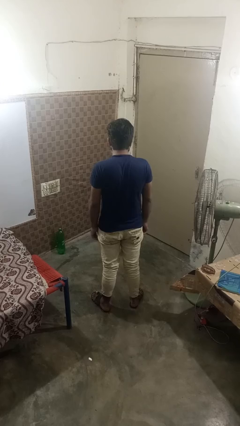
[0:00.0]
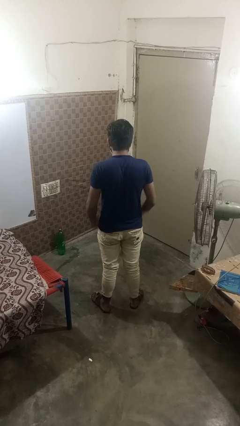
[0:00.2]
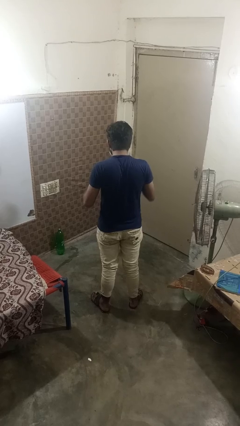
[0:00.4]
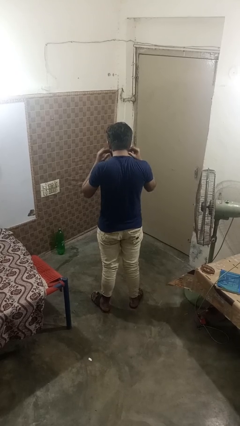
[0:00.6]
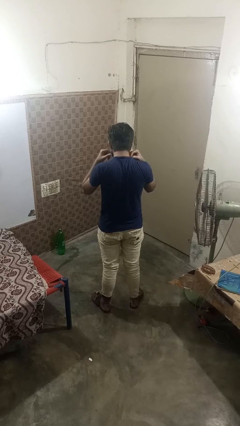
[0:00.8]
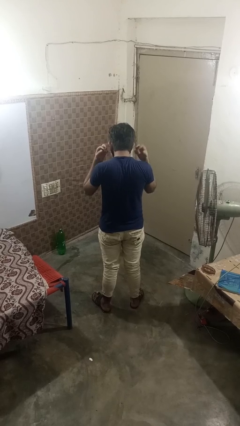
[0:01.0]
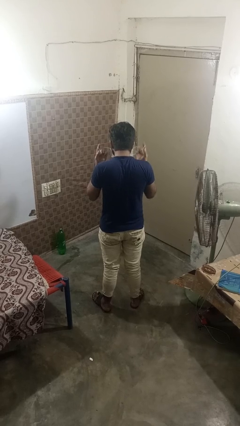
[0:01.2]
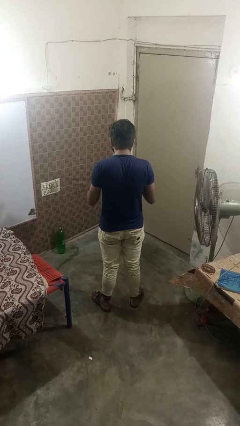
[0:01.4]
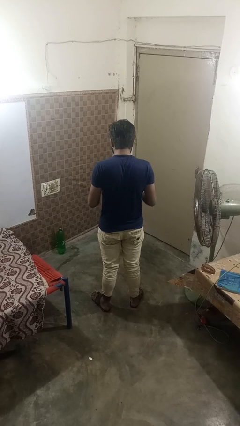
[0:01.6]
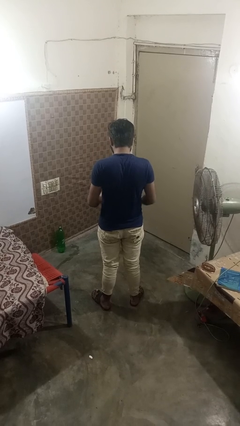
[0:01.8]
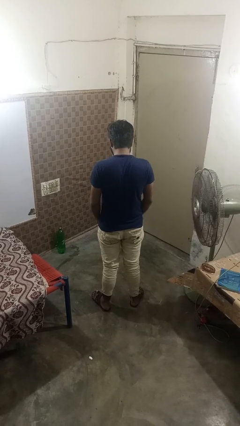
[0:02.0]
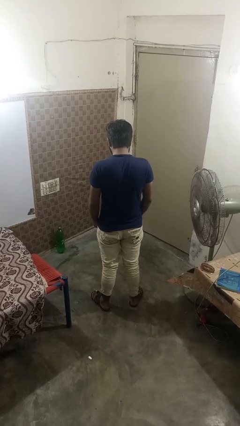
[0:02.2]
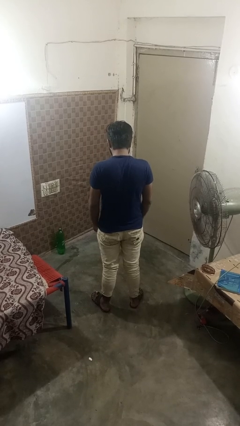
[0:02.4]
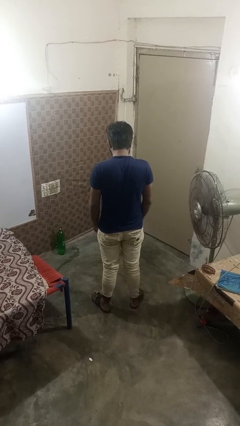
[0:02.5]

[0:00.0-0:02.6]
person takes off facemask

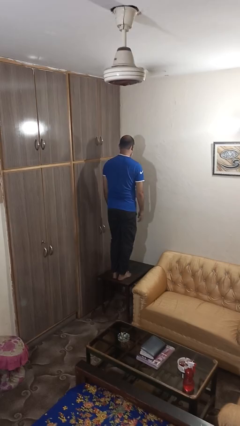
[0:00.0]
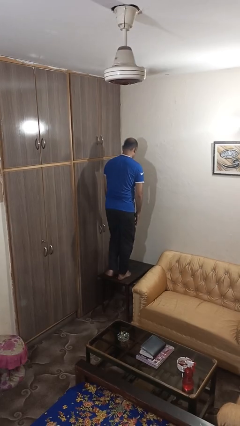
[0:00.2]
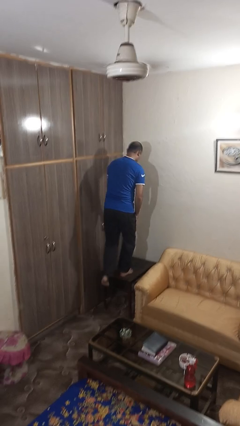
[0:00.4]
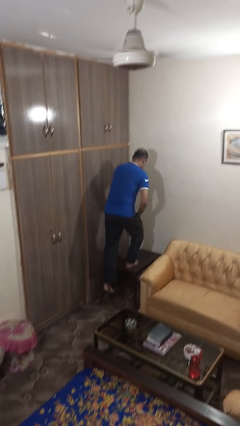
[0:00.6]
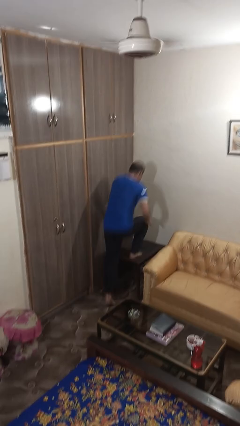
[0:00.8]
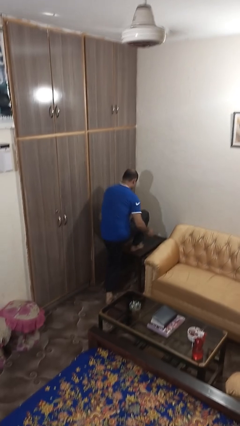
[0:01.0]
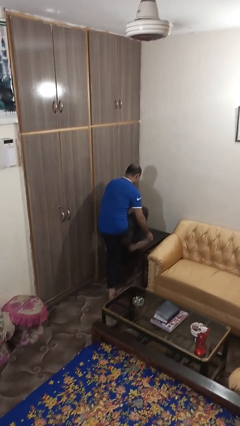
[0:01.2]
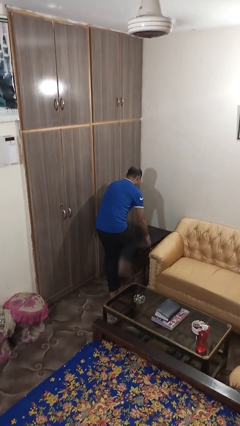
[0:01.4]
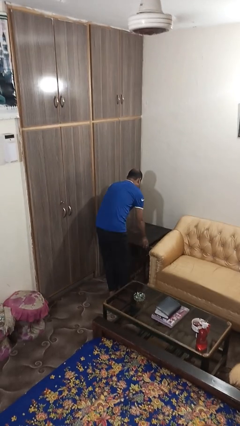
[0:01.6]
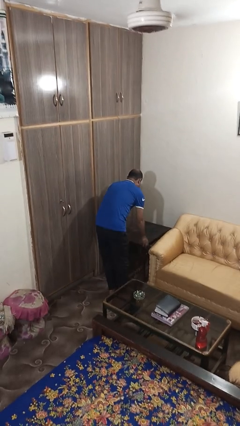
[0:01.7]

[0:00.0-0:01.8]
person climbs off table

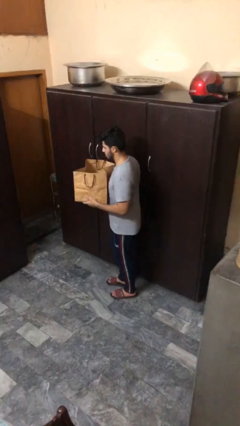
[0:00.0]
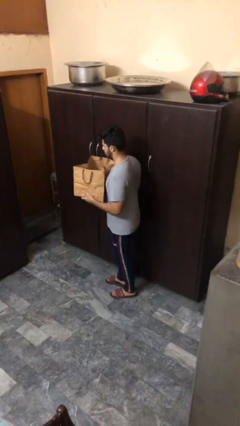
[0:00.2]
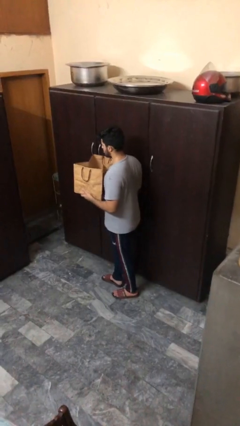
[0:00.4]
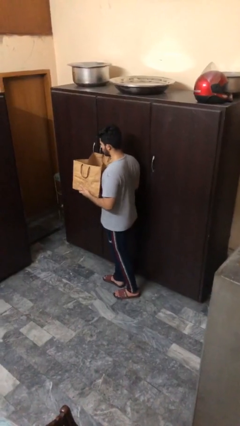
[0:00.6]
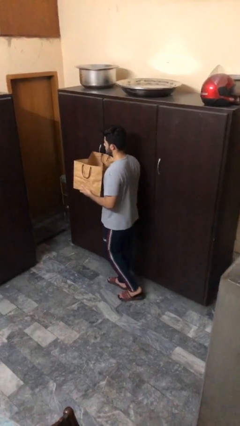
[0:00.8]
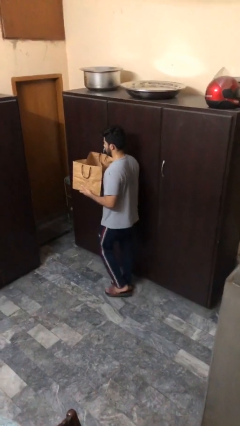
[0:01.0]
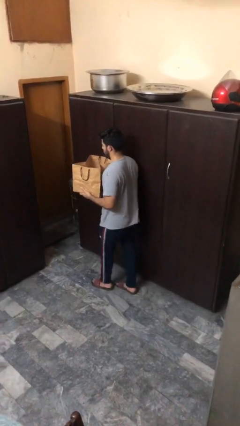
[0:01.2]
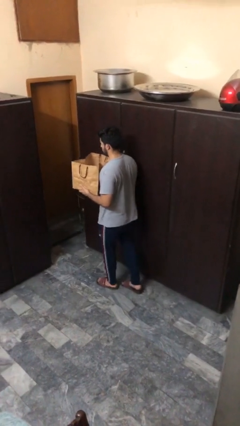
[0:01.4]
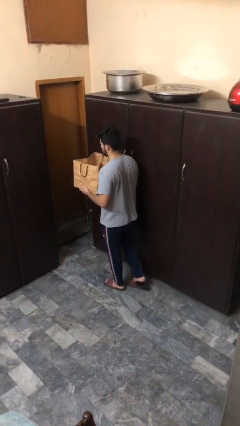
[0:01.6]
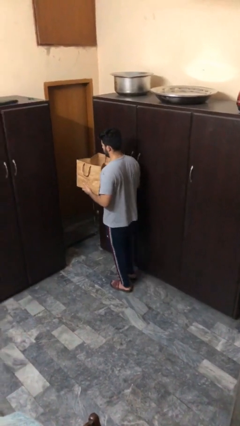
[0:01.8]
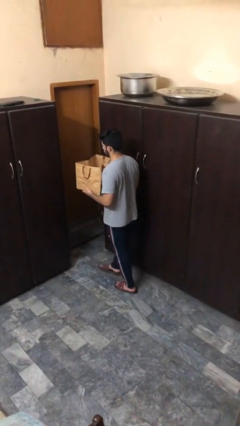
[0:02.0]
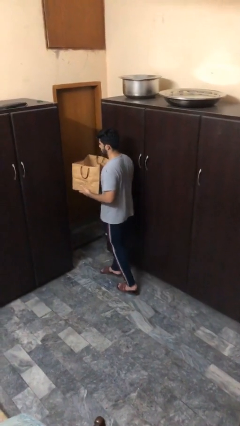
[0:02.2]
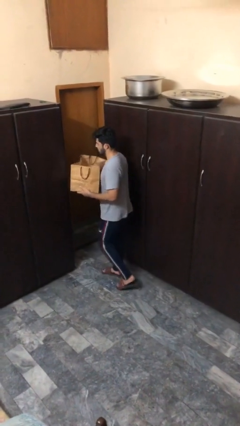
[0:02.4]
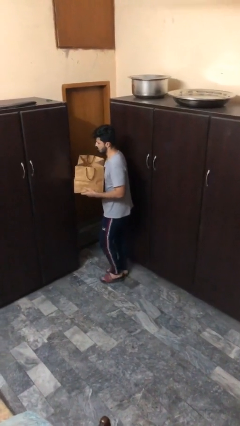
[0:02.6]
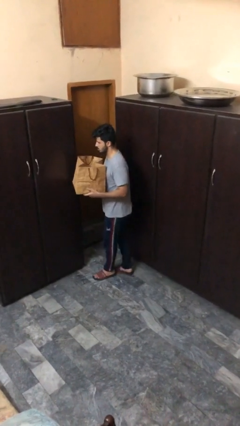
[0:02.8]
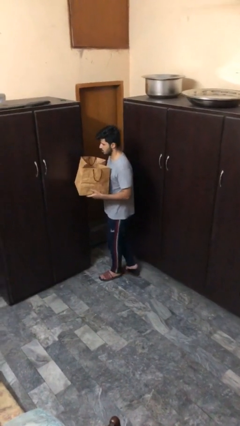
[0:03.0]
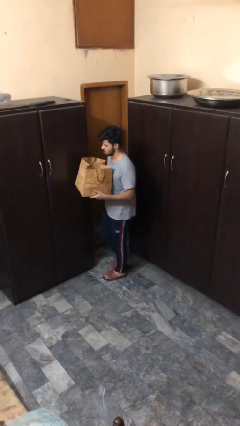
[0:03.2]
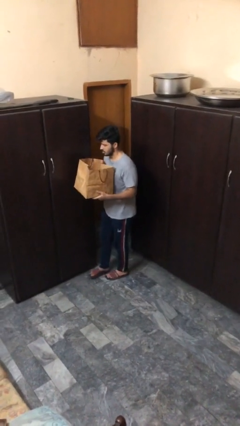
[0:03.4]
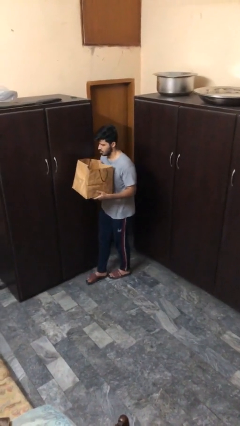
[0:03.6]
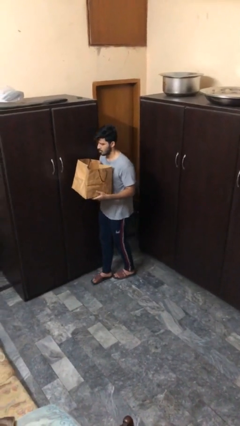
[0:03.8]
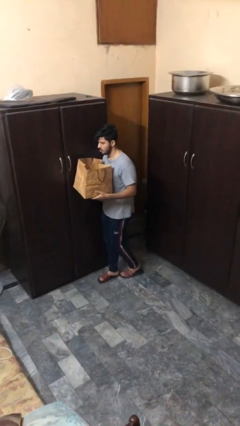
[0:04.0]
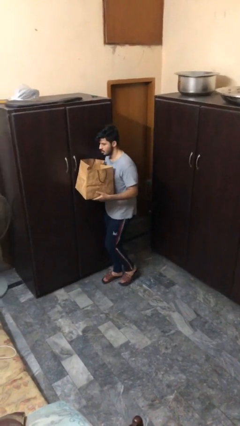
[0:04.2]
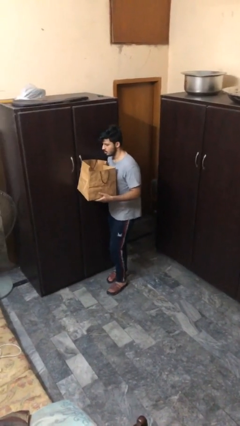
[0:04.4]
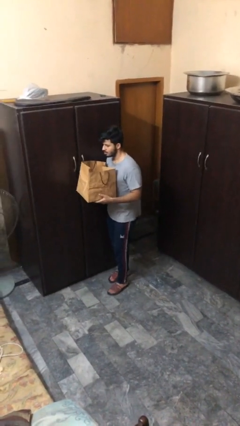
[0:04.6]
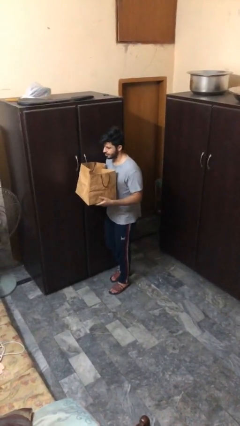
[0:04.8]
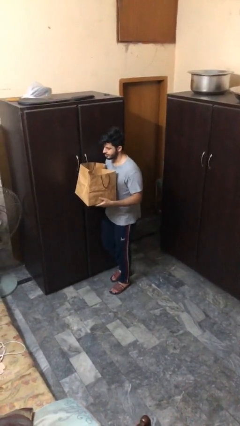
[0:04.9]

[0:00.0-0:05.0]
person carries groceries

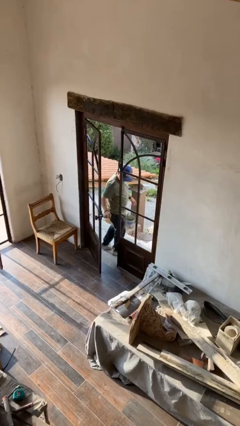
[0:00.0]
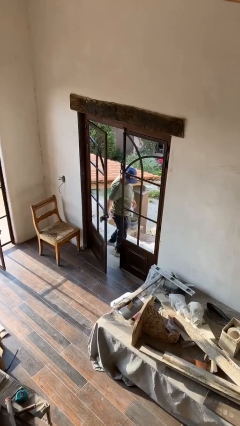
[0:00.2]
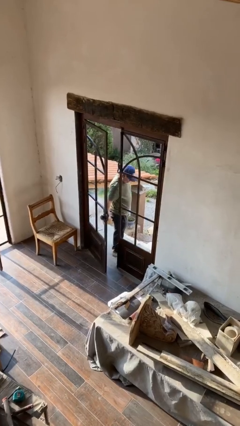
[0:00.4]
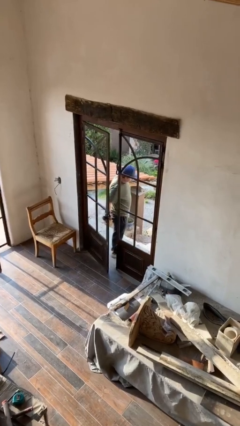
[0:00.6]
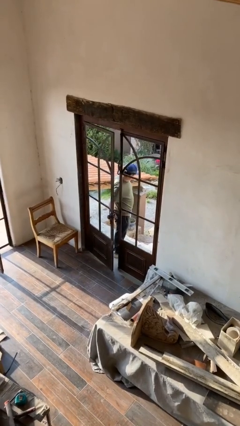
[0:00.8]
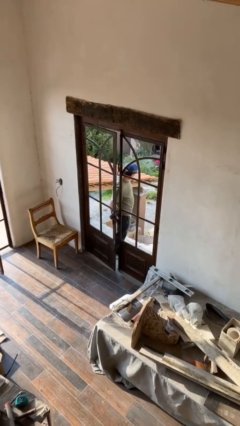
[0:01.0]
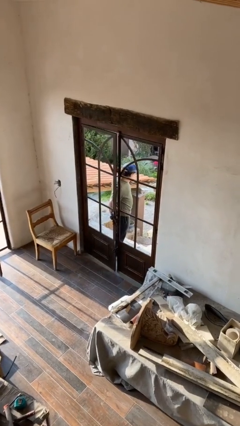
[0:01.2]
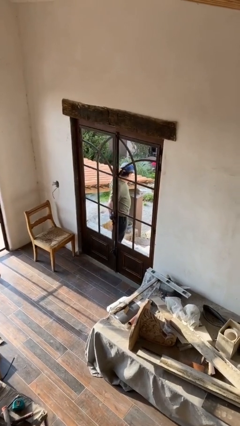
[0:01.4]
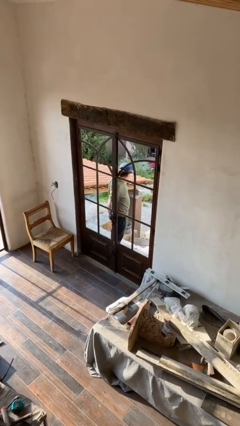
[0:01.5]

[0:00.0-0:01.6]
person closes facility door

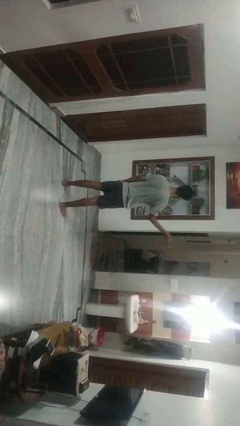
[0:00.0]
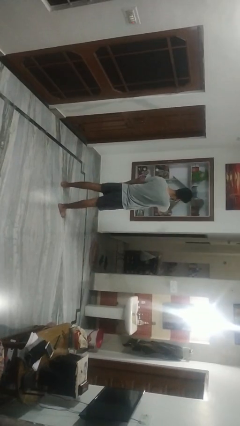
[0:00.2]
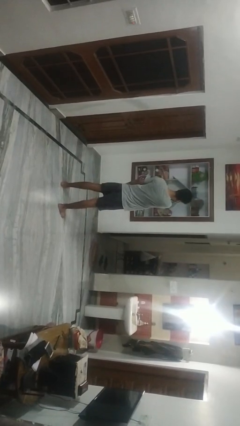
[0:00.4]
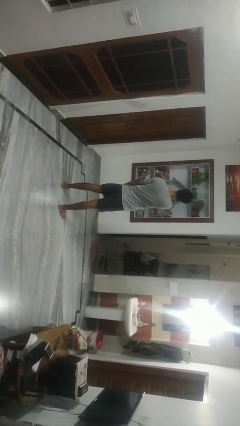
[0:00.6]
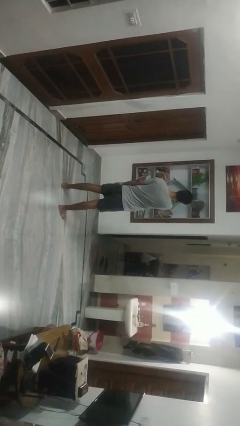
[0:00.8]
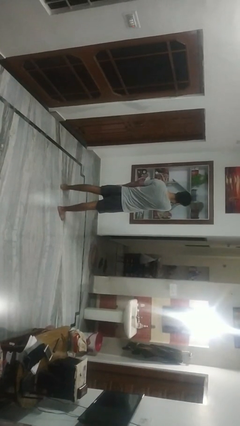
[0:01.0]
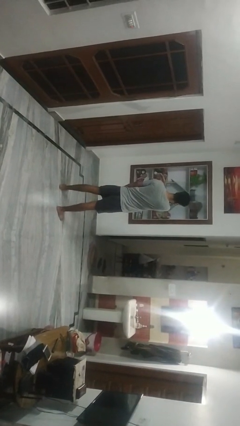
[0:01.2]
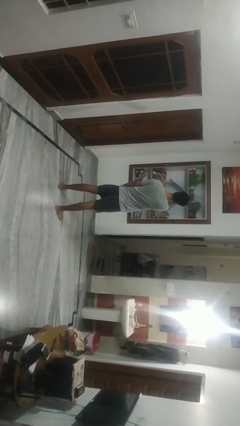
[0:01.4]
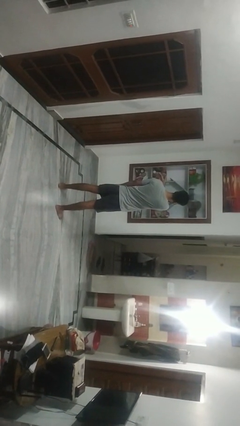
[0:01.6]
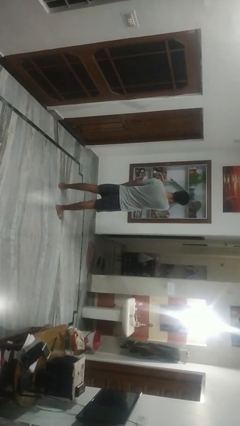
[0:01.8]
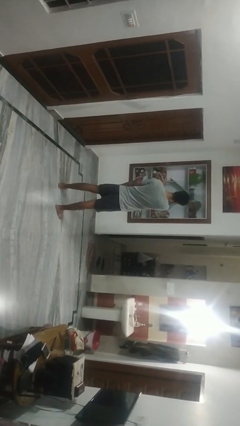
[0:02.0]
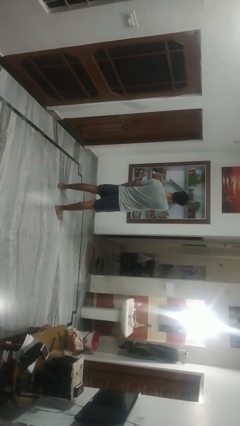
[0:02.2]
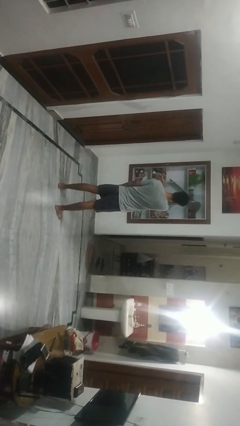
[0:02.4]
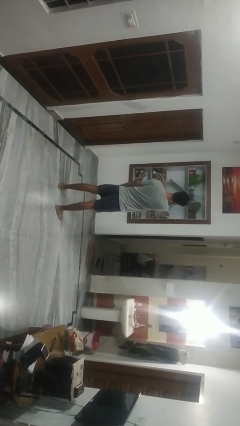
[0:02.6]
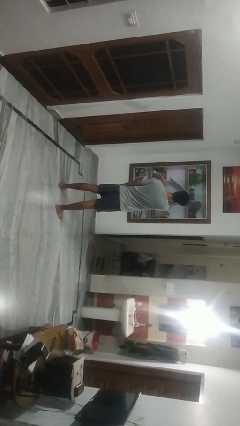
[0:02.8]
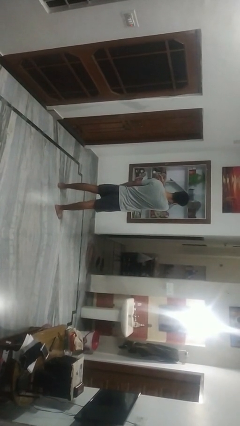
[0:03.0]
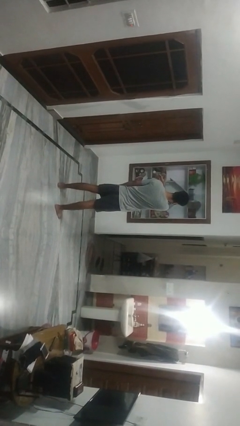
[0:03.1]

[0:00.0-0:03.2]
person gestures swipe left

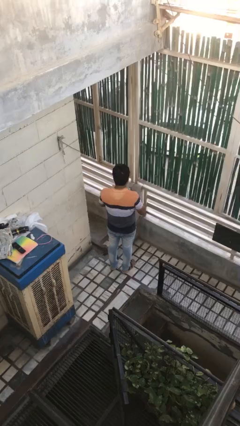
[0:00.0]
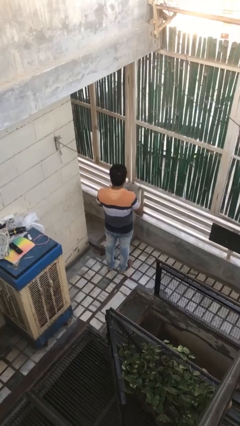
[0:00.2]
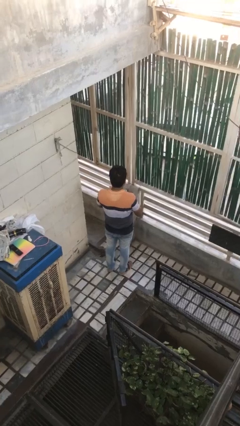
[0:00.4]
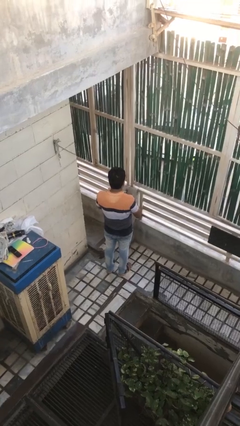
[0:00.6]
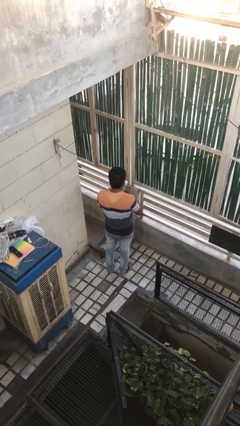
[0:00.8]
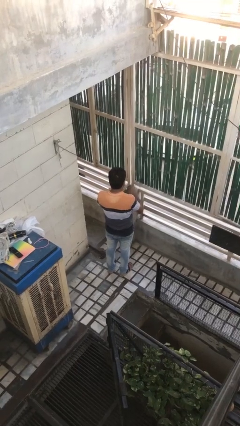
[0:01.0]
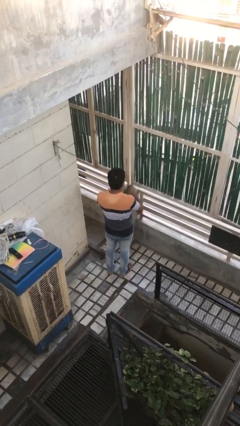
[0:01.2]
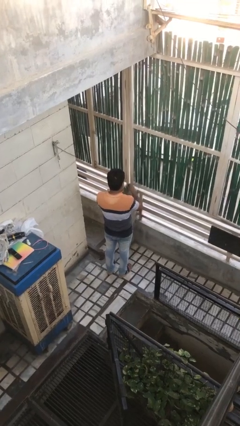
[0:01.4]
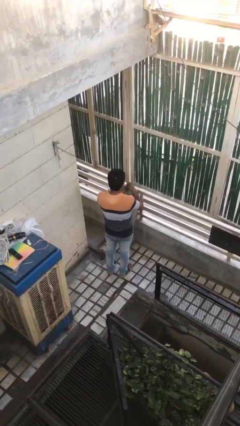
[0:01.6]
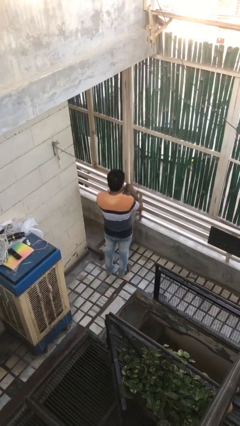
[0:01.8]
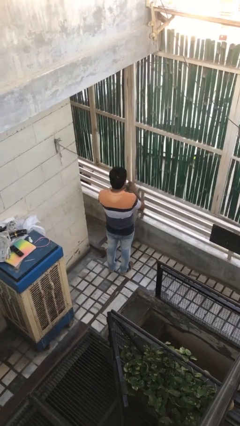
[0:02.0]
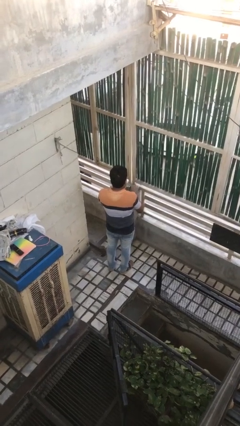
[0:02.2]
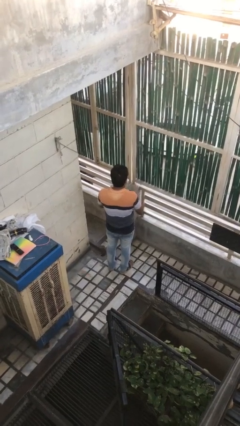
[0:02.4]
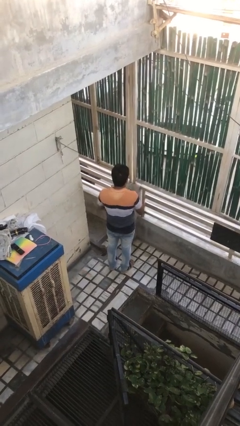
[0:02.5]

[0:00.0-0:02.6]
person opens beverage can

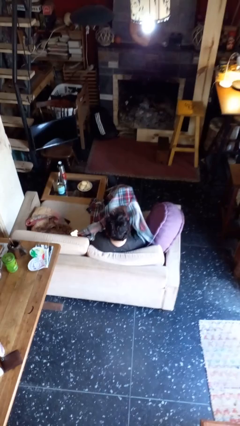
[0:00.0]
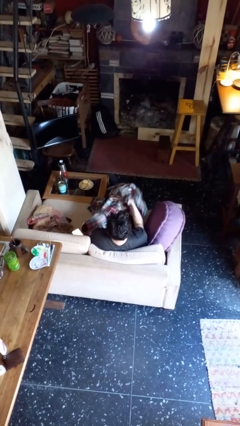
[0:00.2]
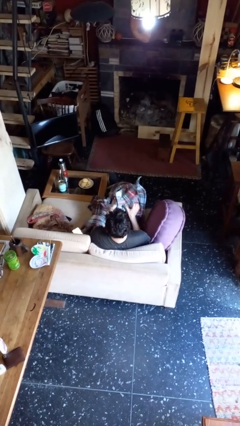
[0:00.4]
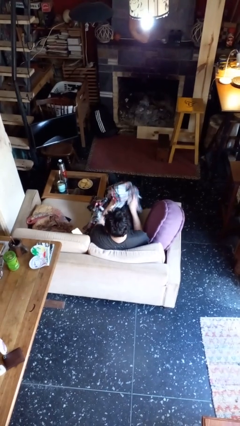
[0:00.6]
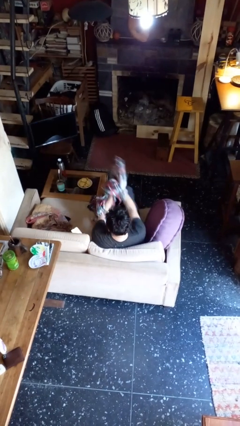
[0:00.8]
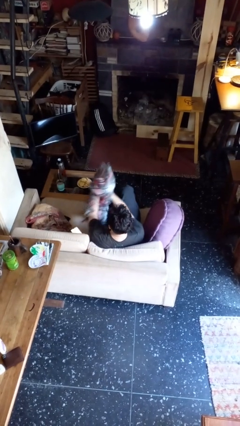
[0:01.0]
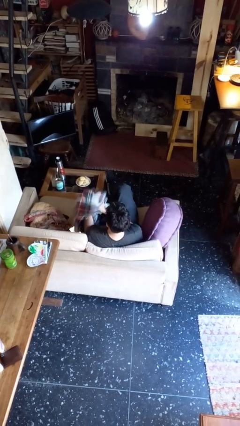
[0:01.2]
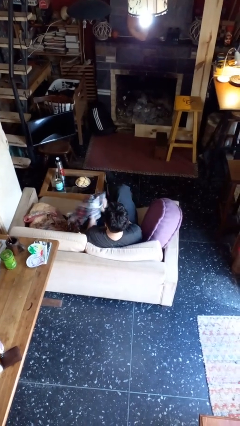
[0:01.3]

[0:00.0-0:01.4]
person uncovers with blanket
